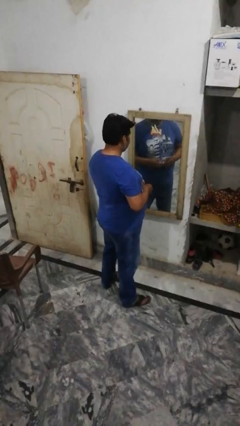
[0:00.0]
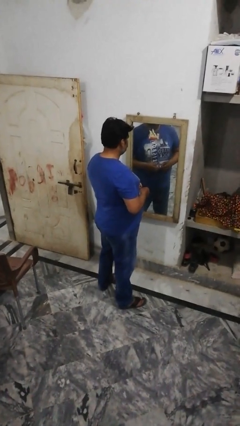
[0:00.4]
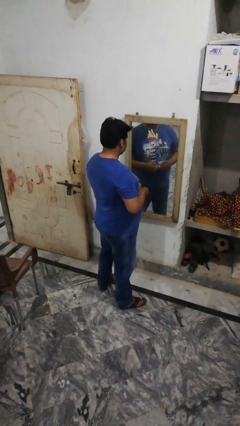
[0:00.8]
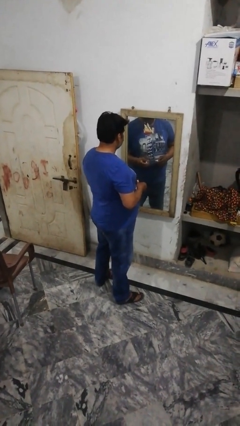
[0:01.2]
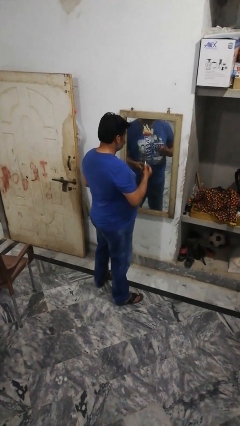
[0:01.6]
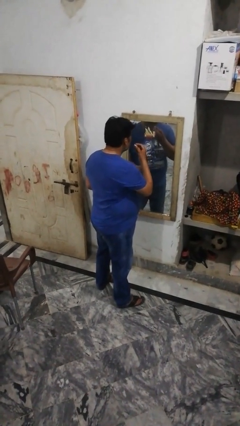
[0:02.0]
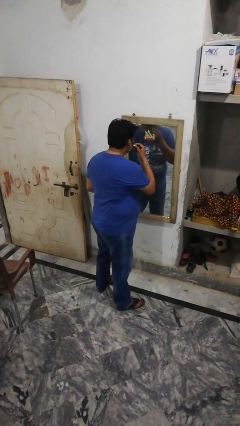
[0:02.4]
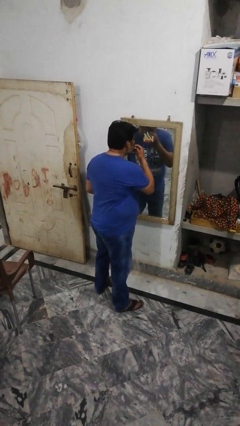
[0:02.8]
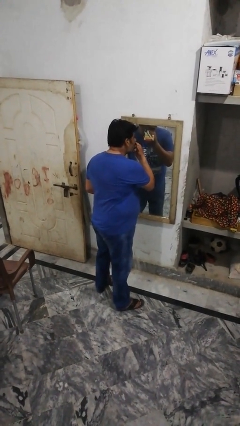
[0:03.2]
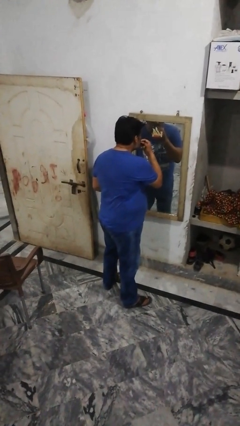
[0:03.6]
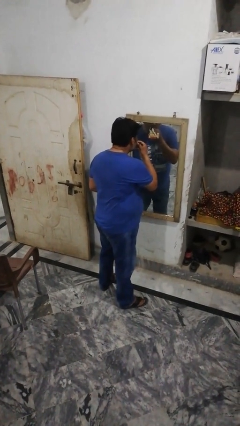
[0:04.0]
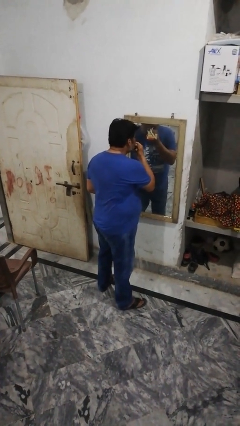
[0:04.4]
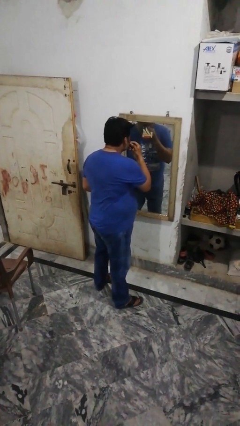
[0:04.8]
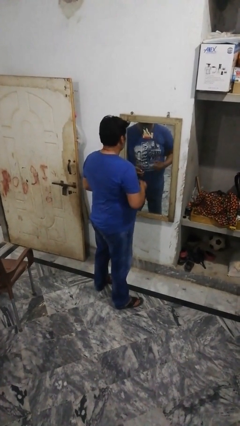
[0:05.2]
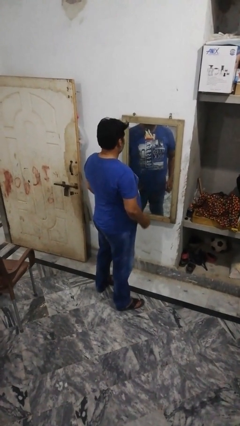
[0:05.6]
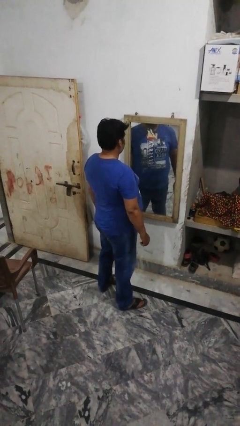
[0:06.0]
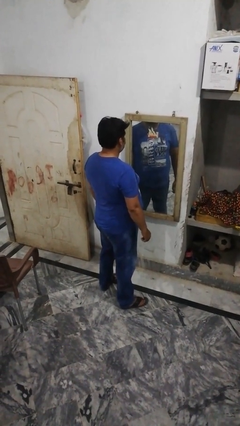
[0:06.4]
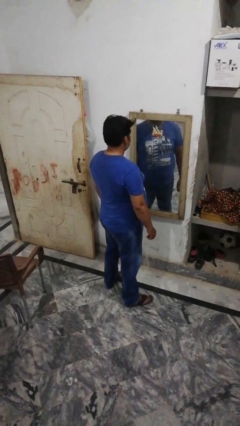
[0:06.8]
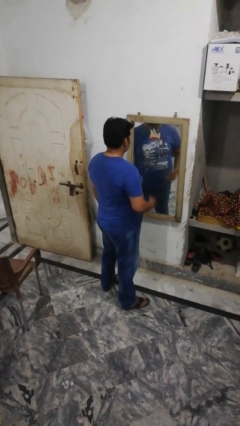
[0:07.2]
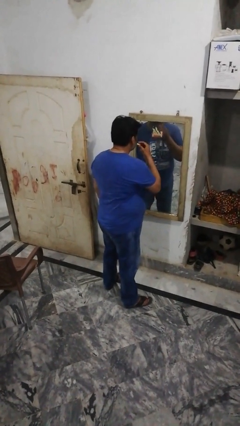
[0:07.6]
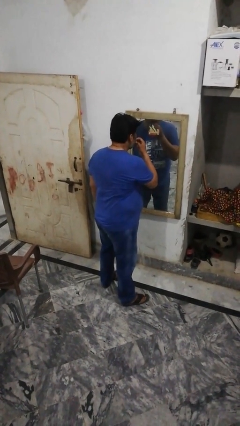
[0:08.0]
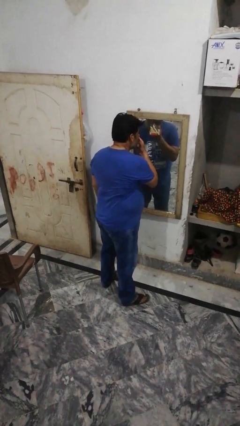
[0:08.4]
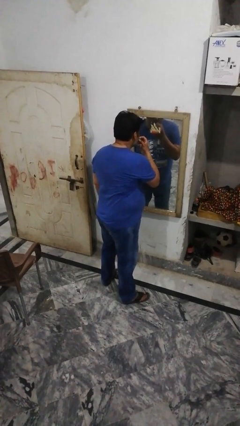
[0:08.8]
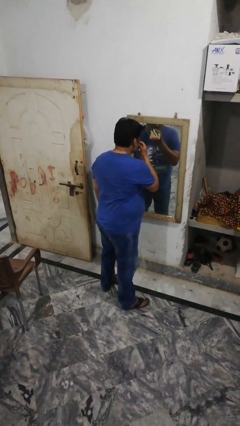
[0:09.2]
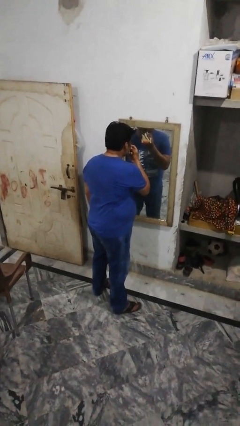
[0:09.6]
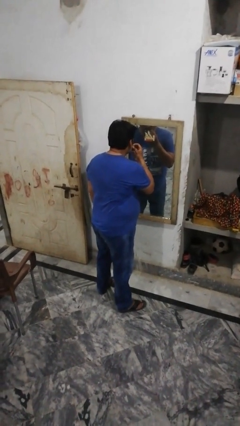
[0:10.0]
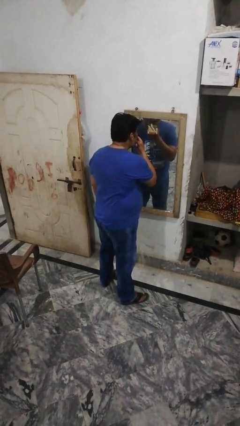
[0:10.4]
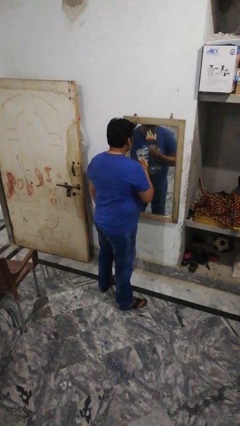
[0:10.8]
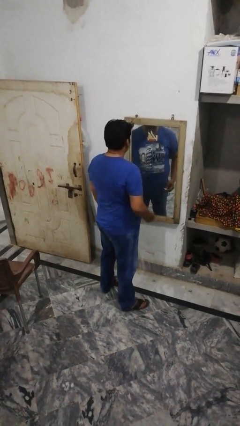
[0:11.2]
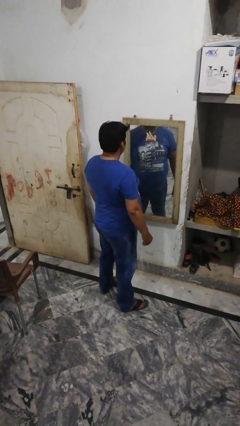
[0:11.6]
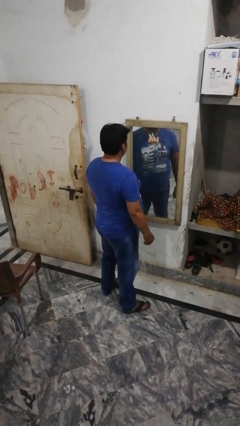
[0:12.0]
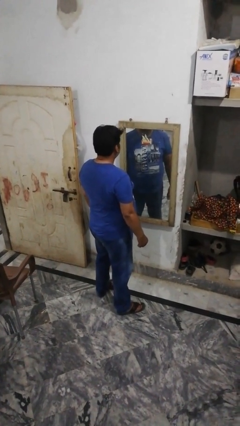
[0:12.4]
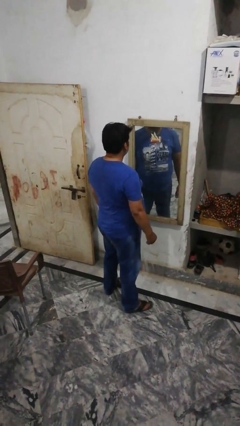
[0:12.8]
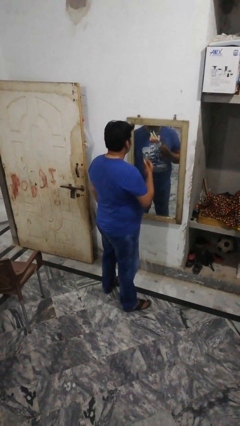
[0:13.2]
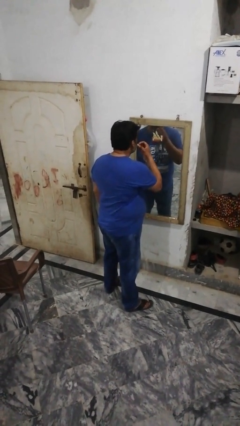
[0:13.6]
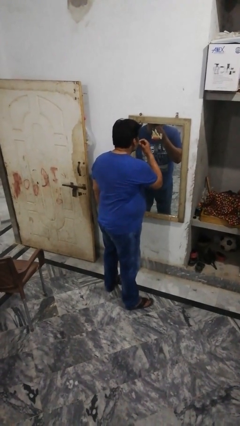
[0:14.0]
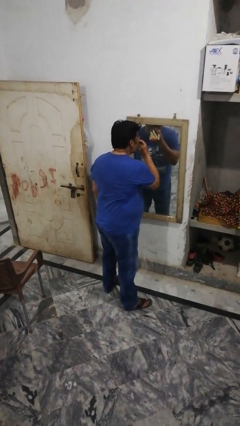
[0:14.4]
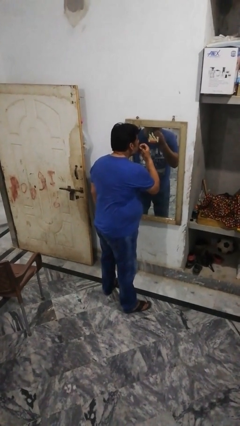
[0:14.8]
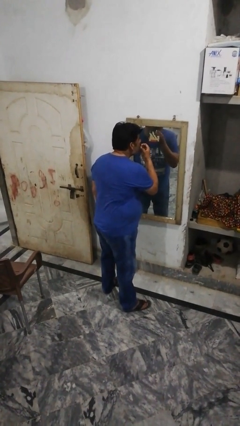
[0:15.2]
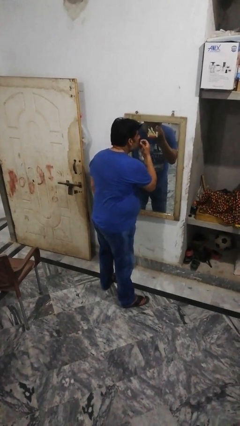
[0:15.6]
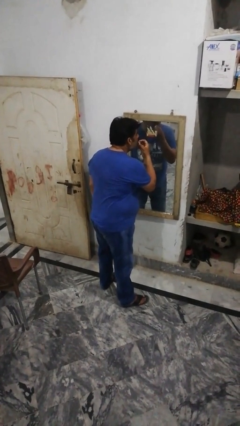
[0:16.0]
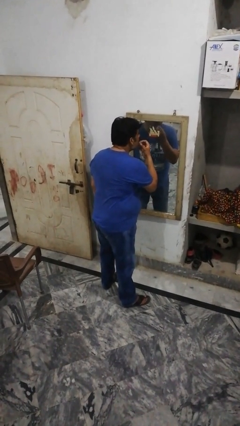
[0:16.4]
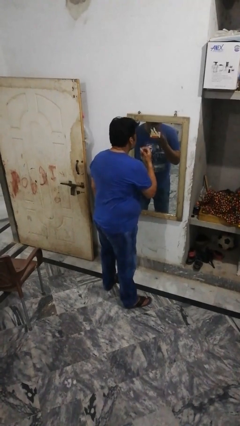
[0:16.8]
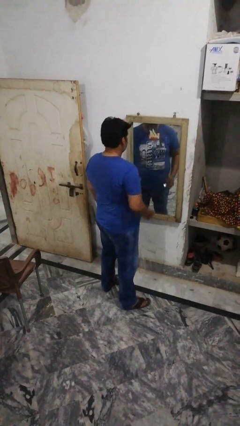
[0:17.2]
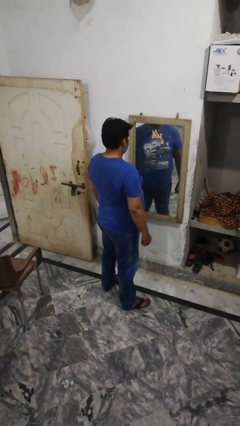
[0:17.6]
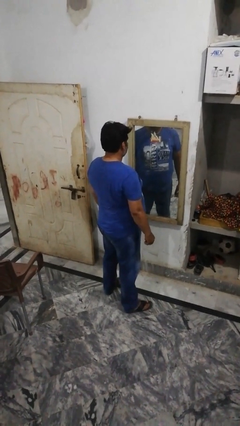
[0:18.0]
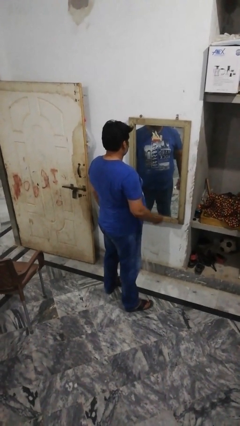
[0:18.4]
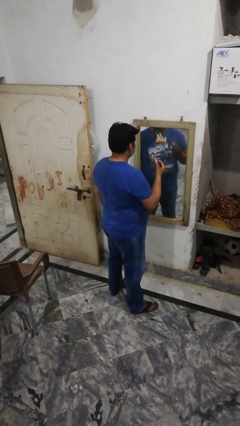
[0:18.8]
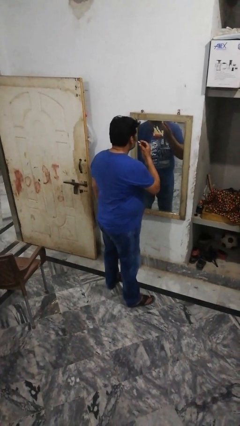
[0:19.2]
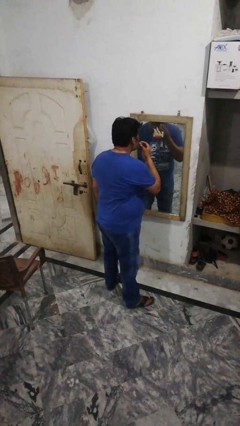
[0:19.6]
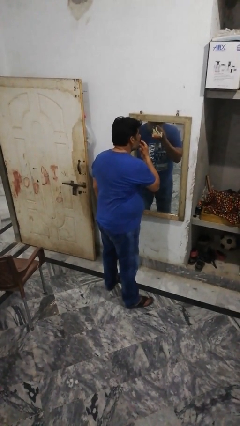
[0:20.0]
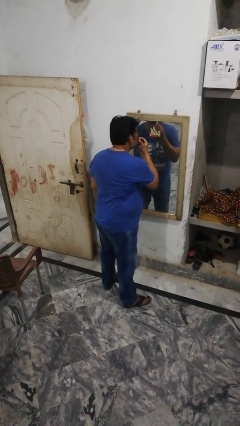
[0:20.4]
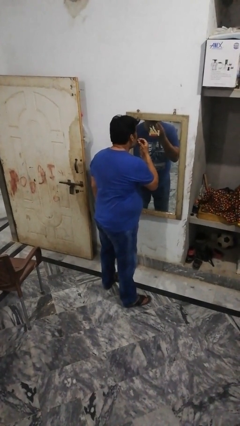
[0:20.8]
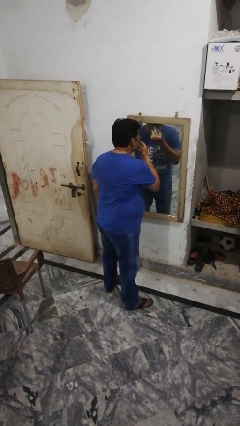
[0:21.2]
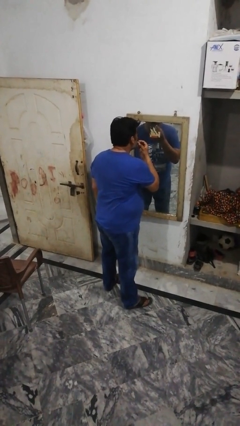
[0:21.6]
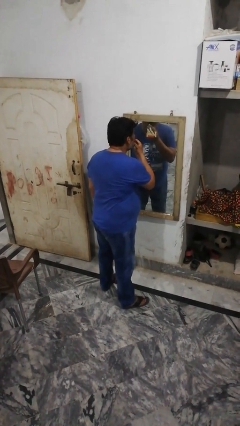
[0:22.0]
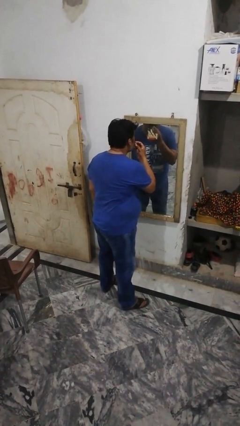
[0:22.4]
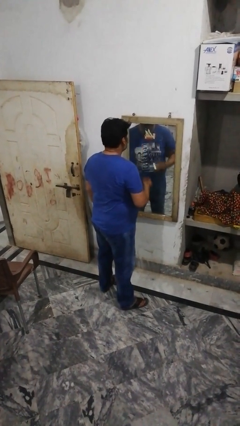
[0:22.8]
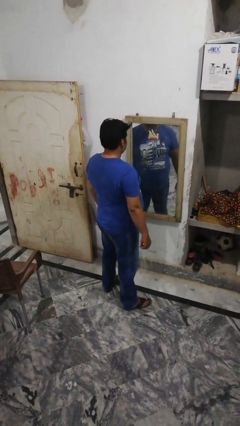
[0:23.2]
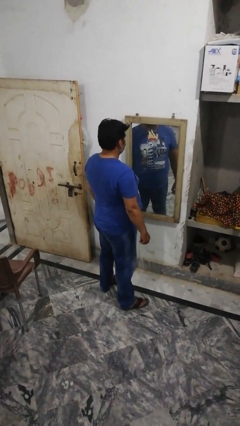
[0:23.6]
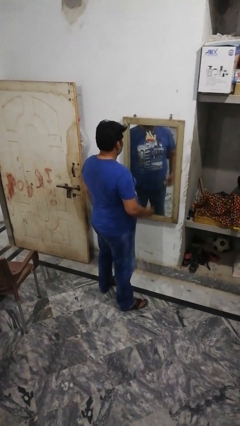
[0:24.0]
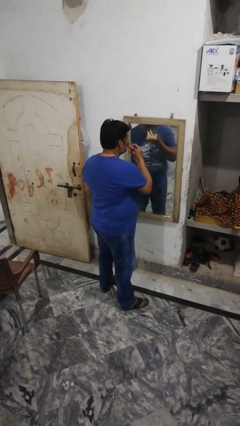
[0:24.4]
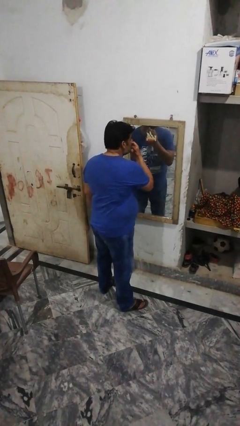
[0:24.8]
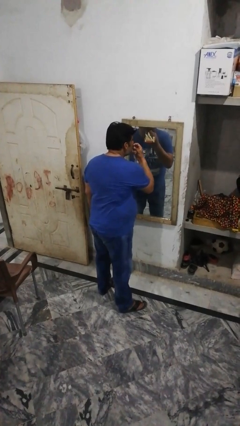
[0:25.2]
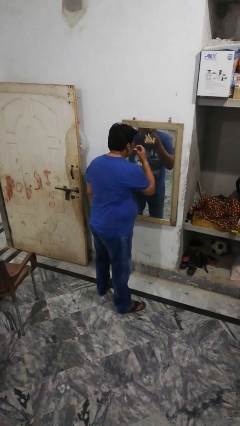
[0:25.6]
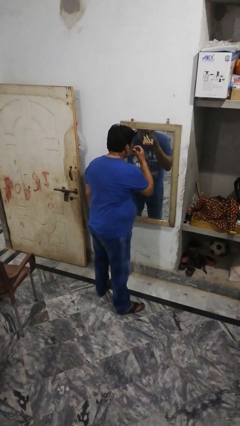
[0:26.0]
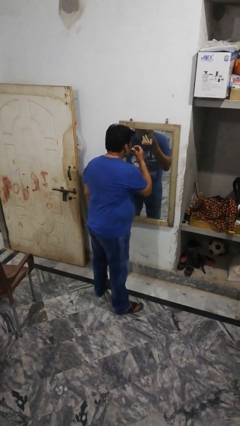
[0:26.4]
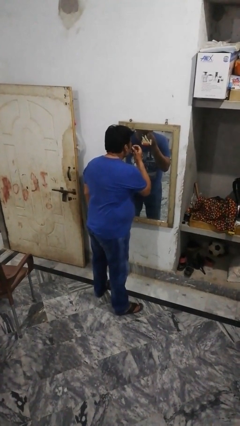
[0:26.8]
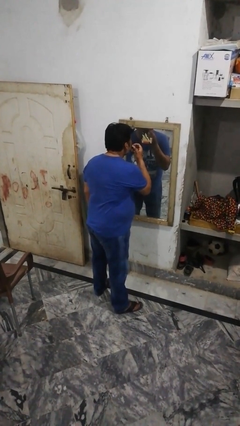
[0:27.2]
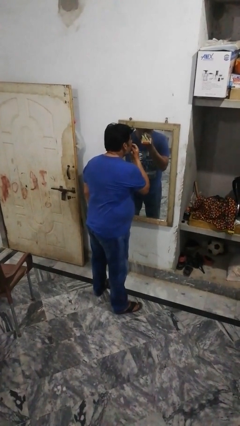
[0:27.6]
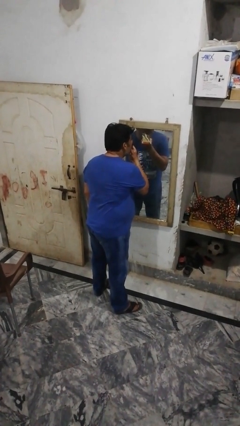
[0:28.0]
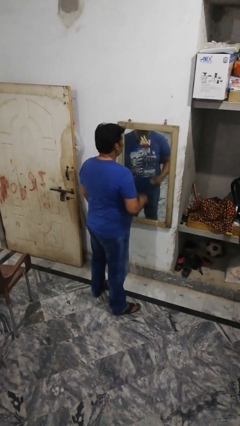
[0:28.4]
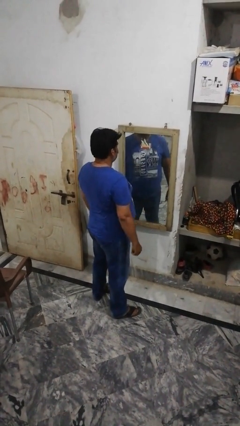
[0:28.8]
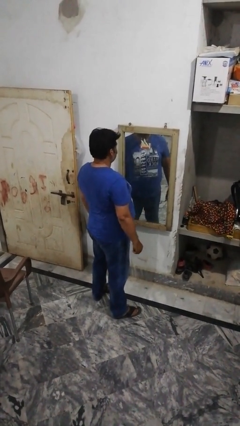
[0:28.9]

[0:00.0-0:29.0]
person applies lip makeup

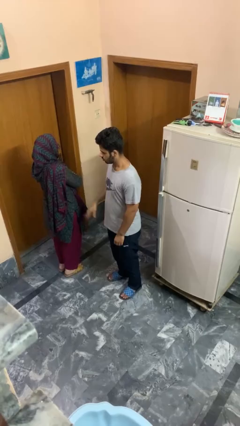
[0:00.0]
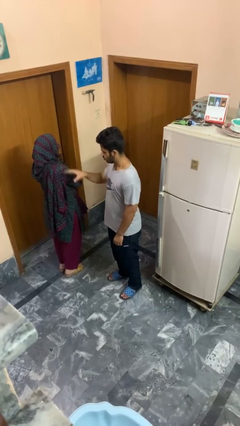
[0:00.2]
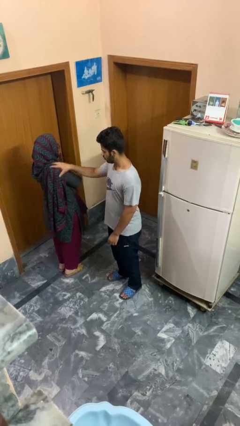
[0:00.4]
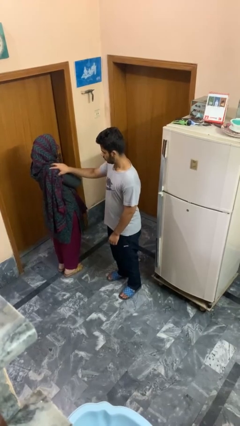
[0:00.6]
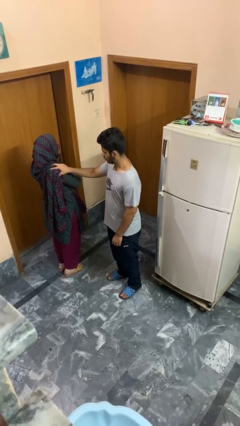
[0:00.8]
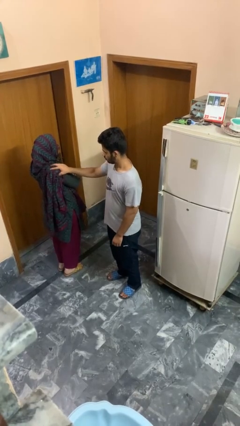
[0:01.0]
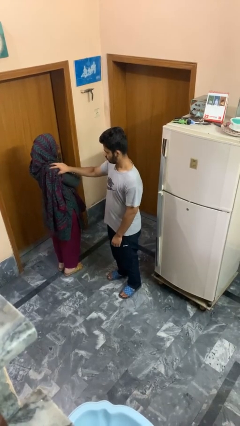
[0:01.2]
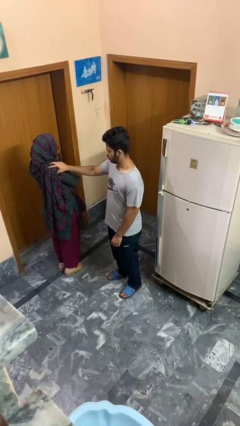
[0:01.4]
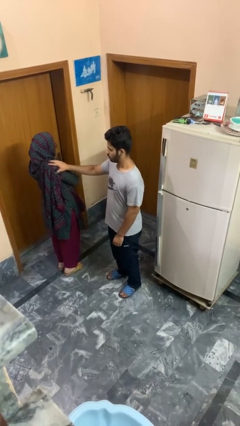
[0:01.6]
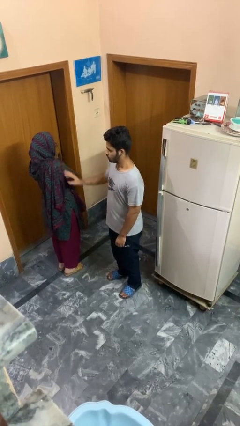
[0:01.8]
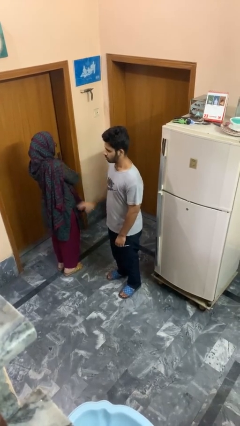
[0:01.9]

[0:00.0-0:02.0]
person pounds shoulders of person

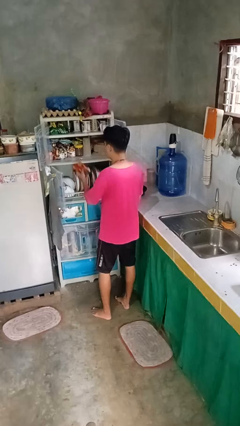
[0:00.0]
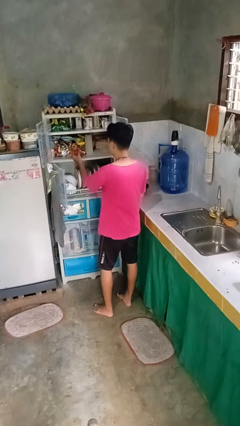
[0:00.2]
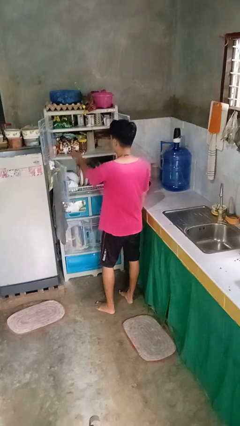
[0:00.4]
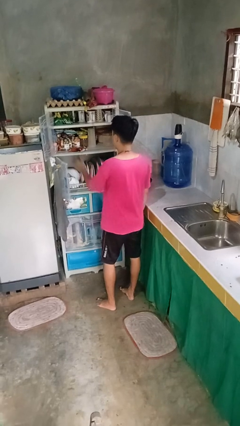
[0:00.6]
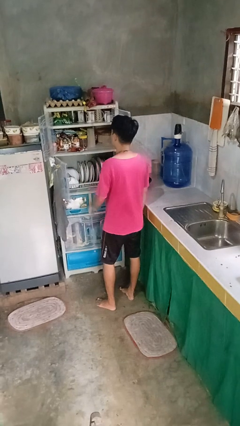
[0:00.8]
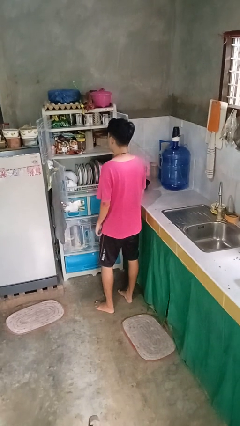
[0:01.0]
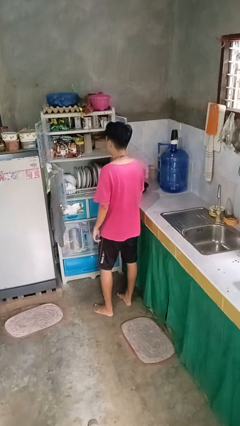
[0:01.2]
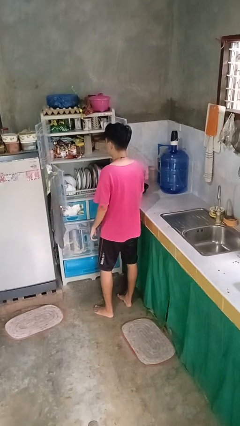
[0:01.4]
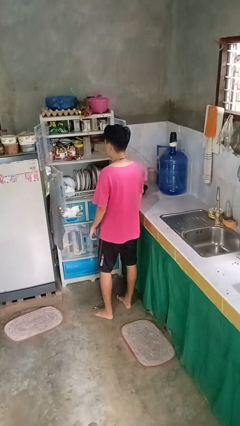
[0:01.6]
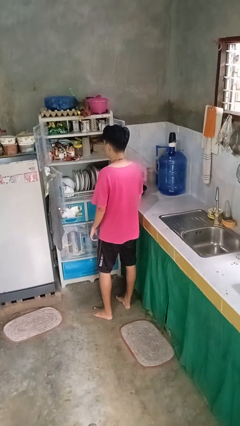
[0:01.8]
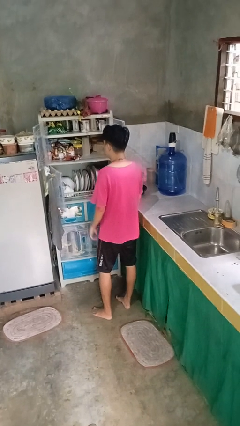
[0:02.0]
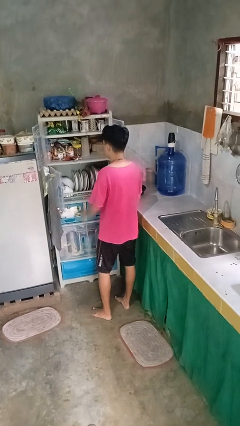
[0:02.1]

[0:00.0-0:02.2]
person puts object in cabinet
